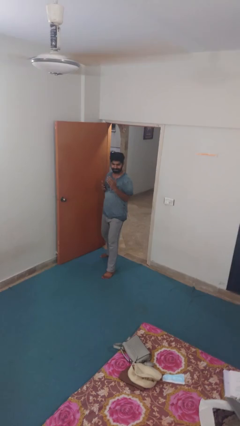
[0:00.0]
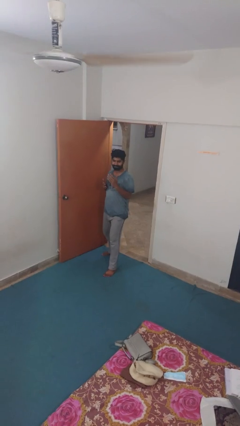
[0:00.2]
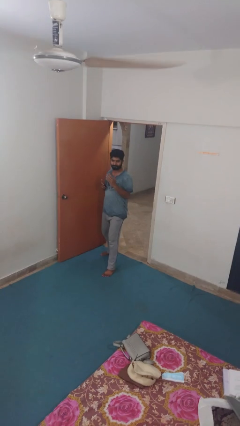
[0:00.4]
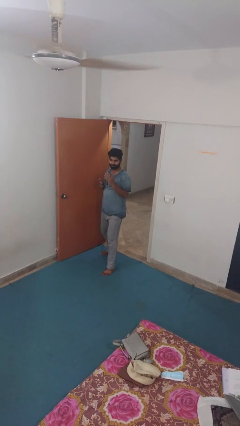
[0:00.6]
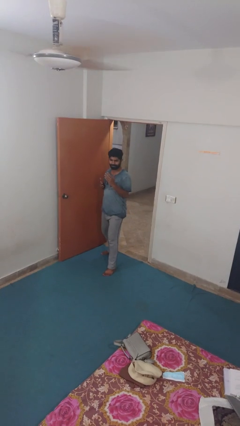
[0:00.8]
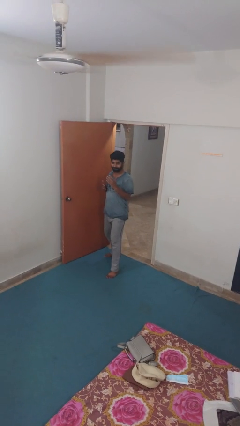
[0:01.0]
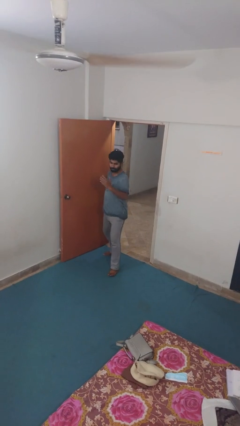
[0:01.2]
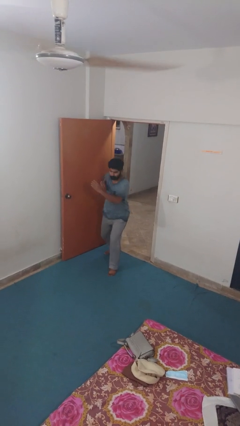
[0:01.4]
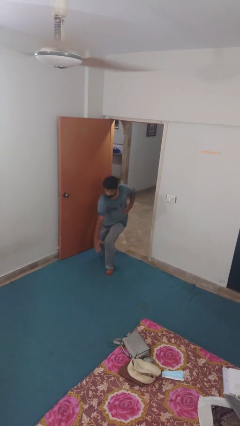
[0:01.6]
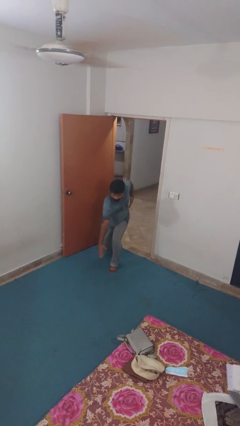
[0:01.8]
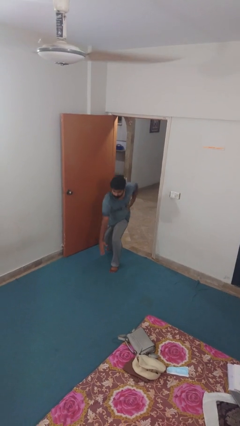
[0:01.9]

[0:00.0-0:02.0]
person karate chop

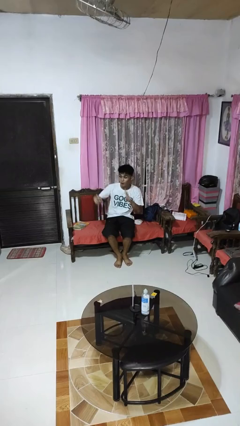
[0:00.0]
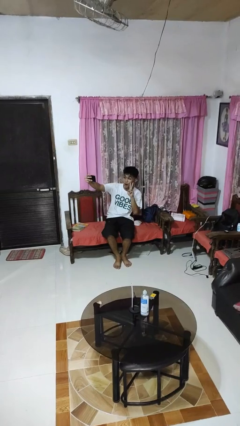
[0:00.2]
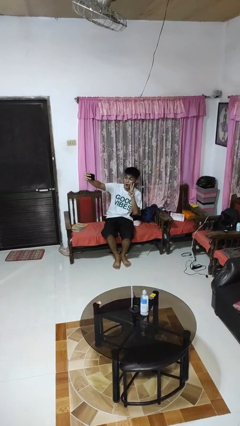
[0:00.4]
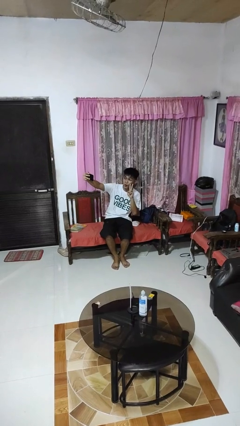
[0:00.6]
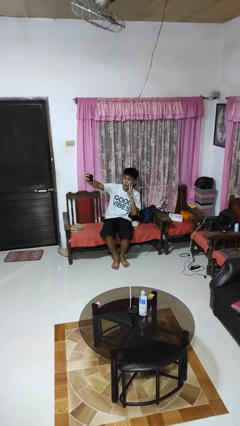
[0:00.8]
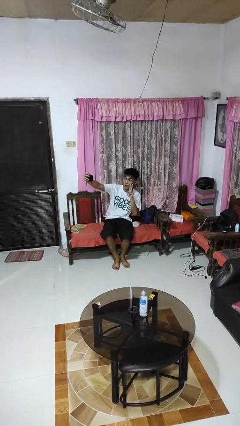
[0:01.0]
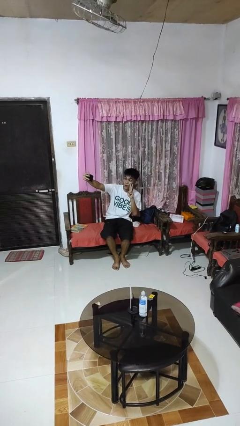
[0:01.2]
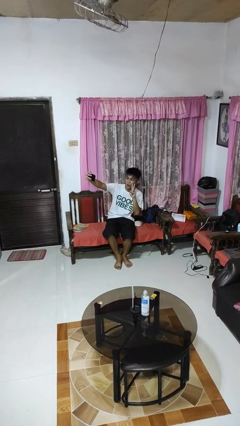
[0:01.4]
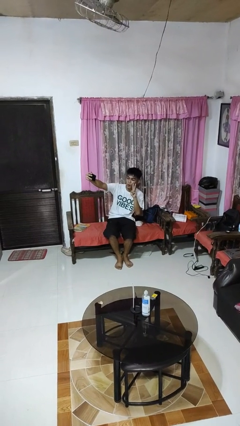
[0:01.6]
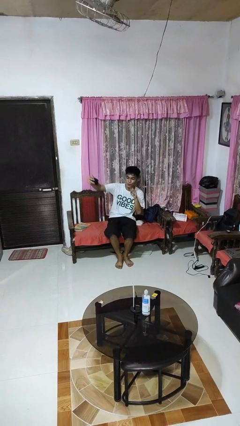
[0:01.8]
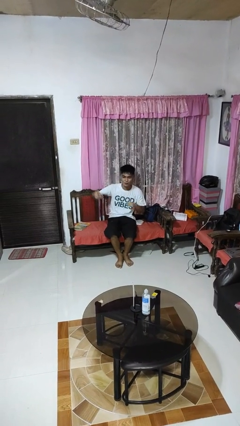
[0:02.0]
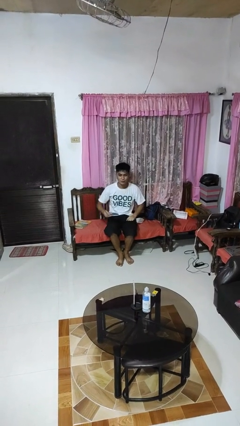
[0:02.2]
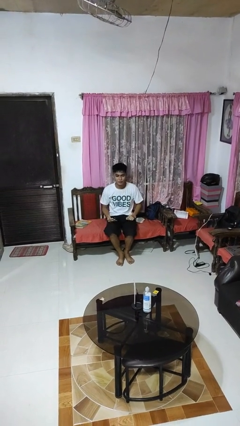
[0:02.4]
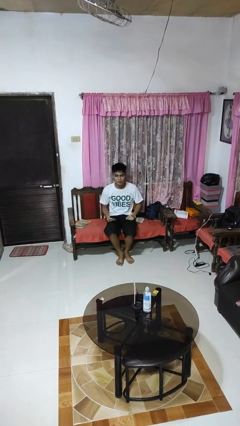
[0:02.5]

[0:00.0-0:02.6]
person takes selfie

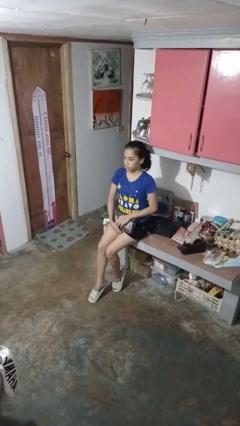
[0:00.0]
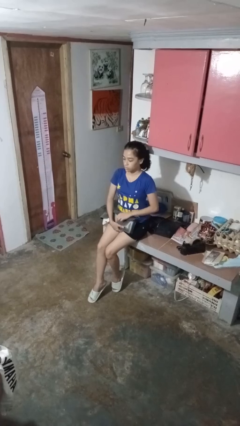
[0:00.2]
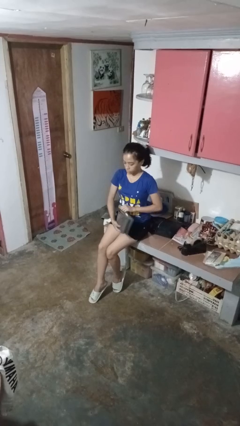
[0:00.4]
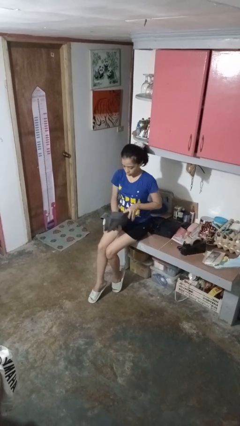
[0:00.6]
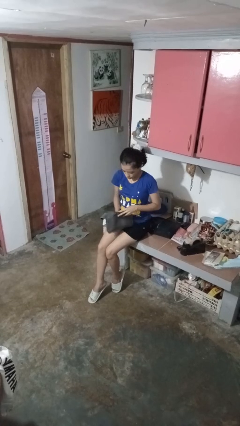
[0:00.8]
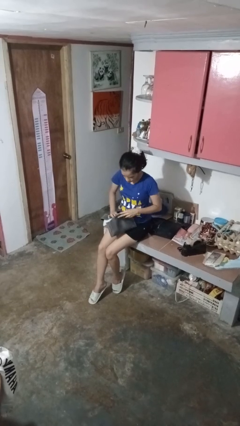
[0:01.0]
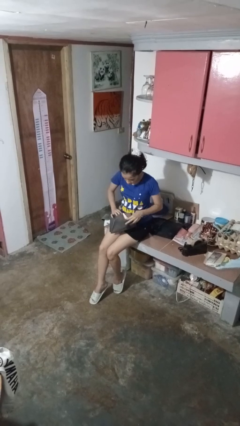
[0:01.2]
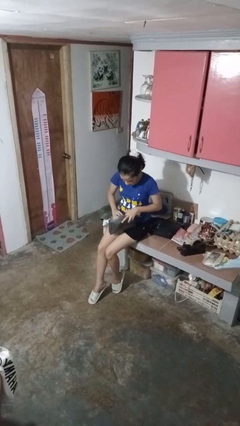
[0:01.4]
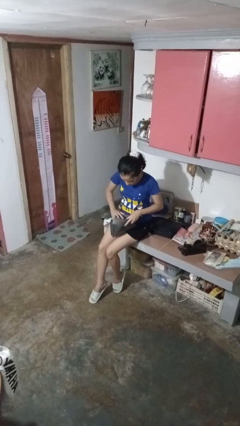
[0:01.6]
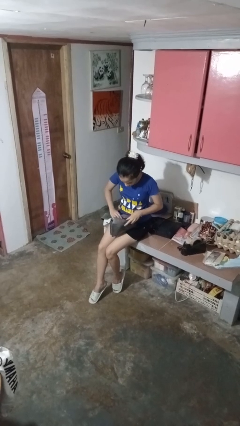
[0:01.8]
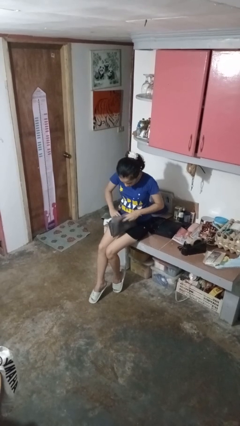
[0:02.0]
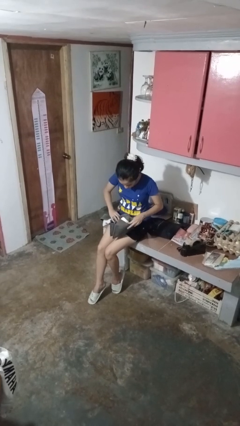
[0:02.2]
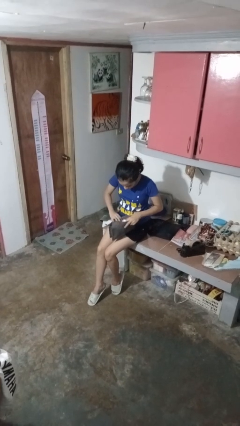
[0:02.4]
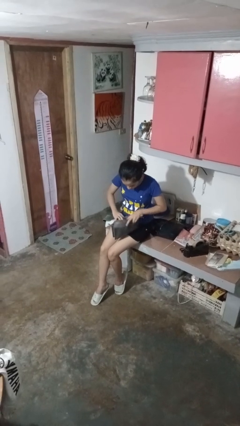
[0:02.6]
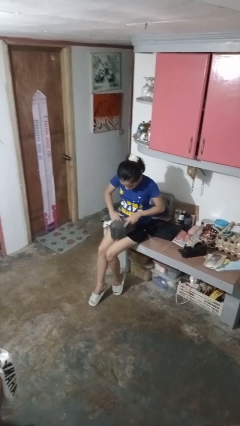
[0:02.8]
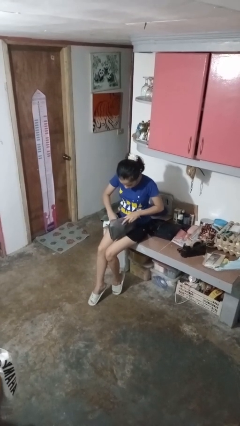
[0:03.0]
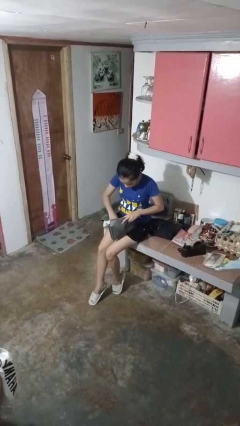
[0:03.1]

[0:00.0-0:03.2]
person searches in purse

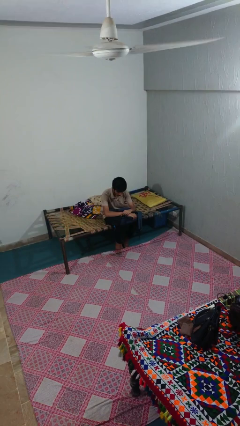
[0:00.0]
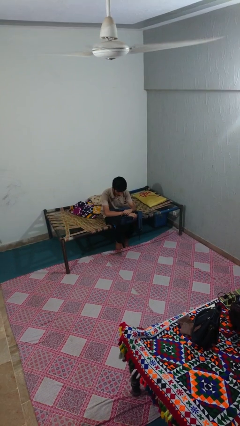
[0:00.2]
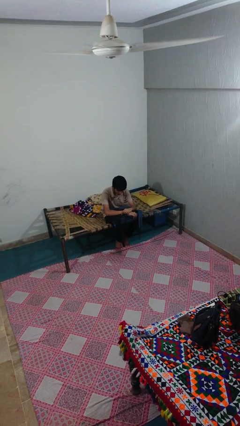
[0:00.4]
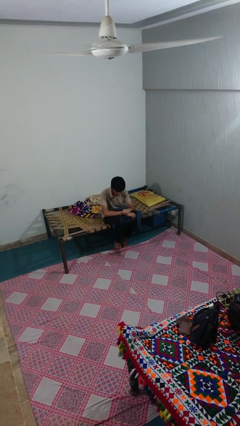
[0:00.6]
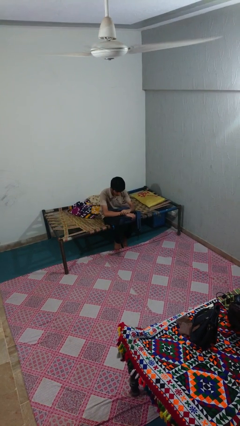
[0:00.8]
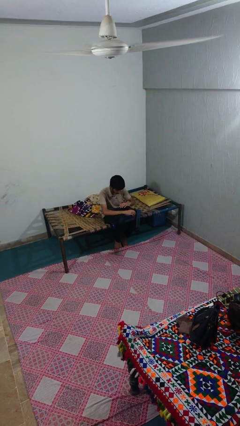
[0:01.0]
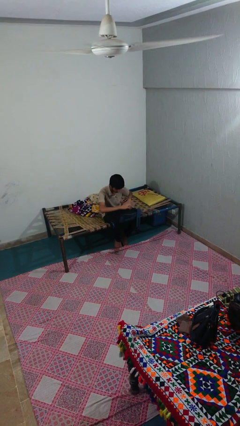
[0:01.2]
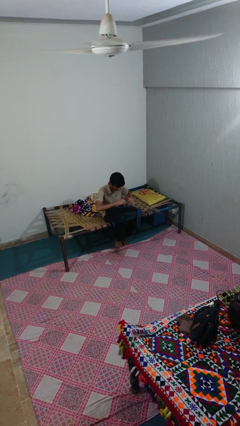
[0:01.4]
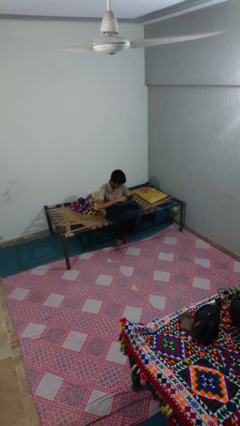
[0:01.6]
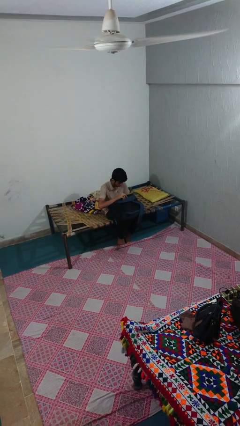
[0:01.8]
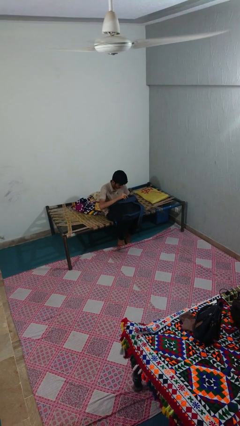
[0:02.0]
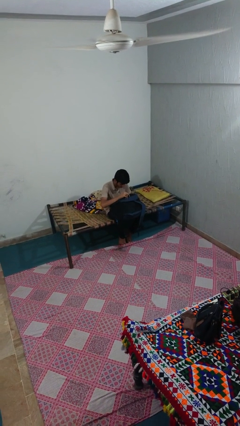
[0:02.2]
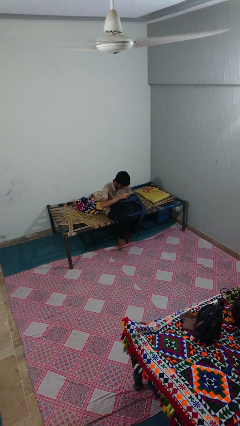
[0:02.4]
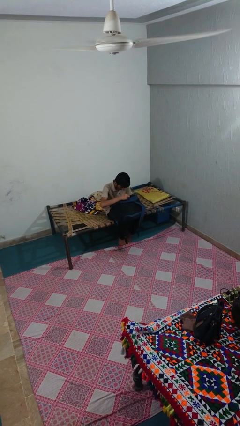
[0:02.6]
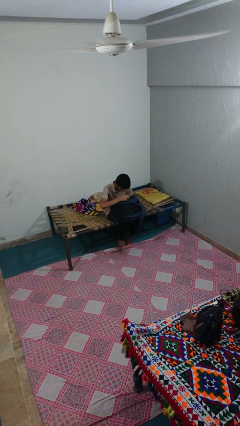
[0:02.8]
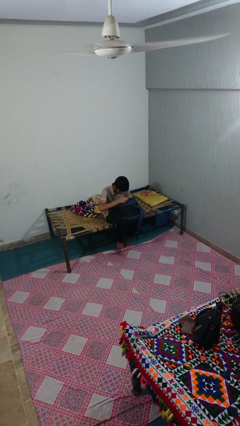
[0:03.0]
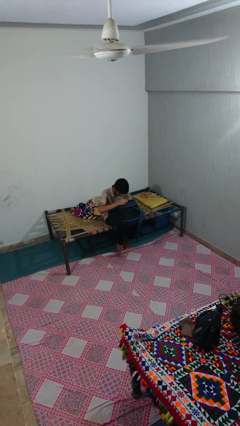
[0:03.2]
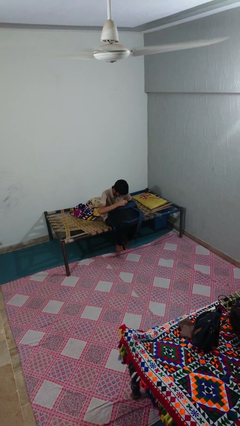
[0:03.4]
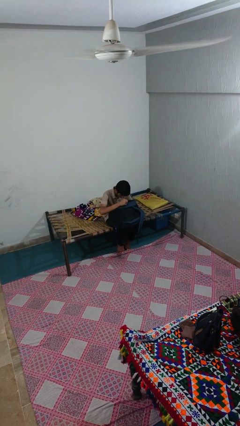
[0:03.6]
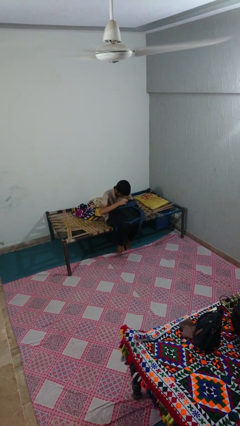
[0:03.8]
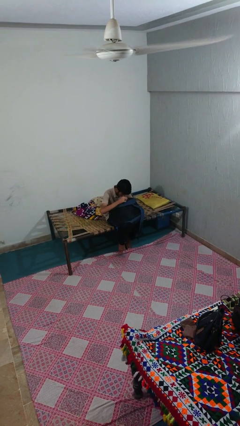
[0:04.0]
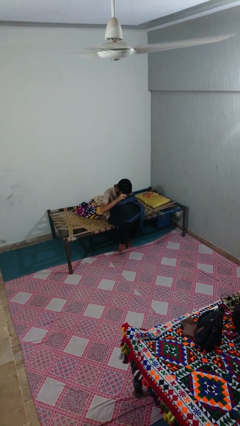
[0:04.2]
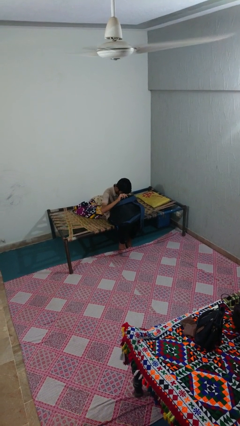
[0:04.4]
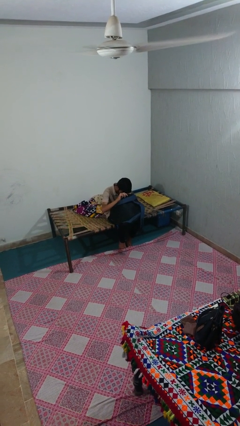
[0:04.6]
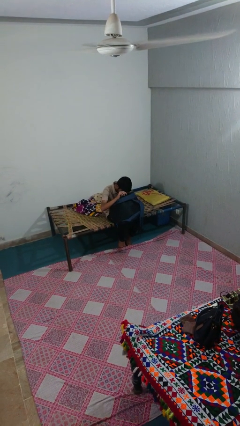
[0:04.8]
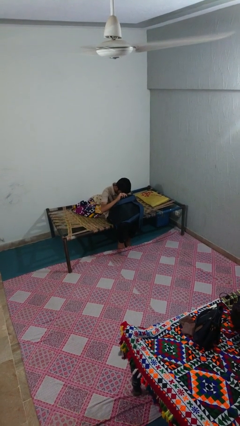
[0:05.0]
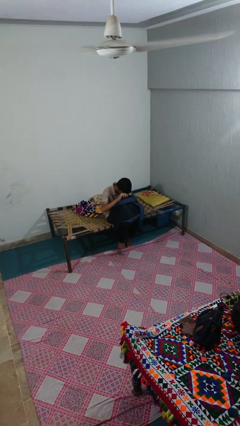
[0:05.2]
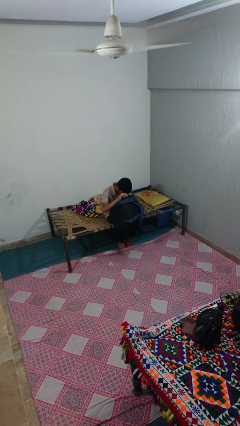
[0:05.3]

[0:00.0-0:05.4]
person searches in backpack

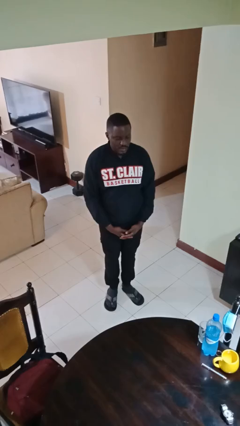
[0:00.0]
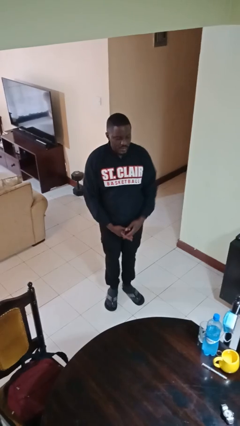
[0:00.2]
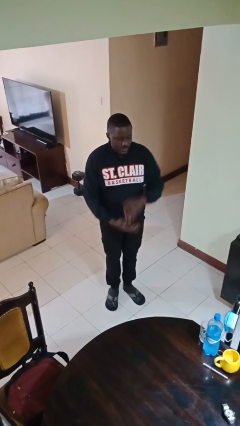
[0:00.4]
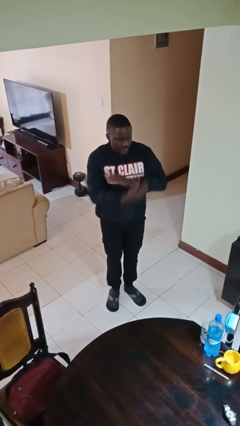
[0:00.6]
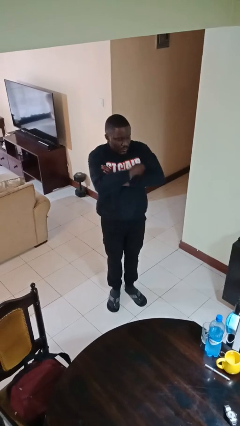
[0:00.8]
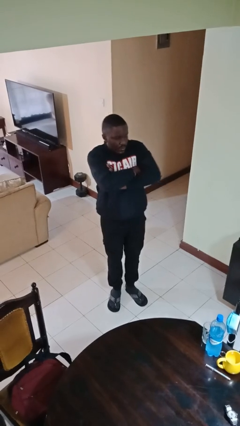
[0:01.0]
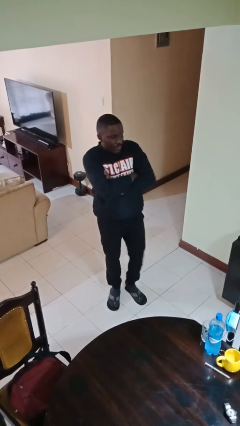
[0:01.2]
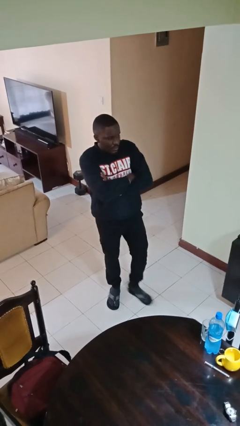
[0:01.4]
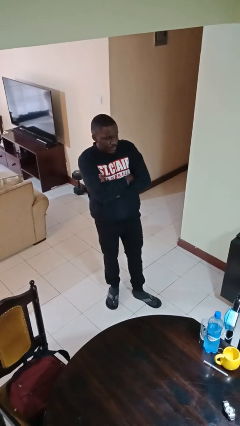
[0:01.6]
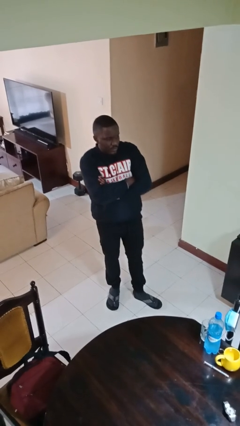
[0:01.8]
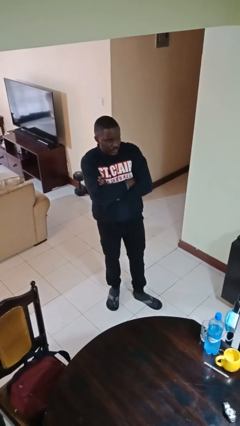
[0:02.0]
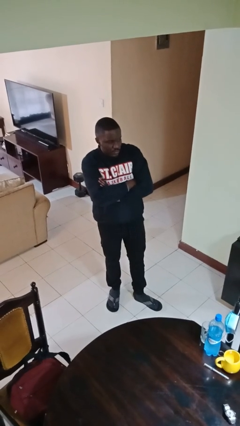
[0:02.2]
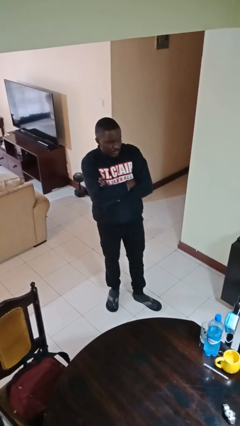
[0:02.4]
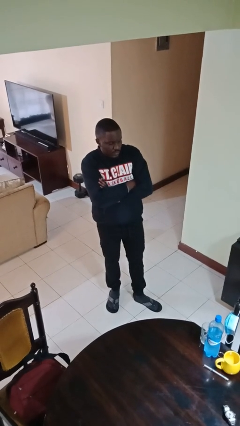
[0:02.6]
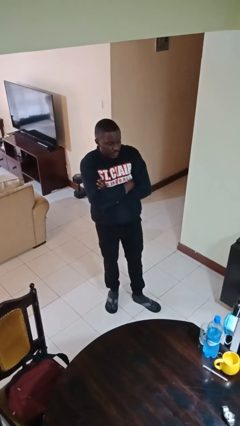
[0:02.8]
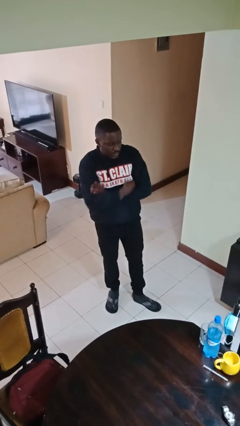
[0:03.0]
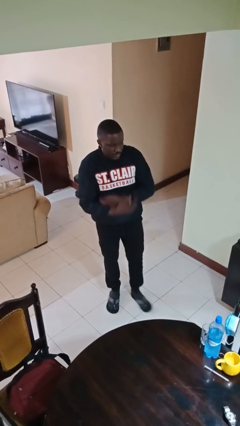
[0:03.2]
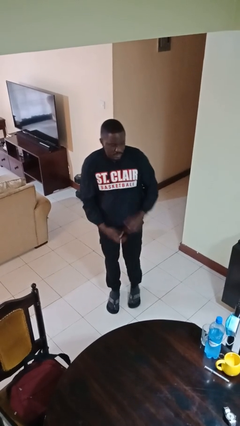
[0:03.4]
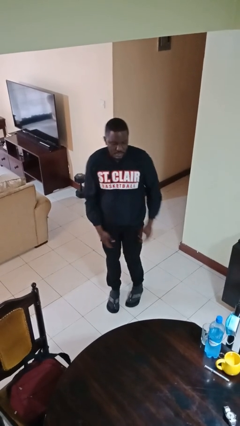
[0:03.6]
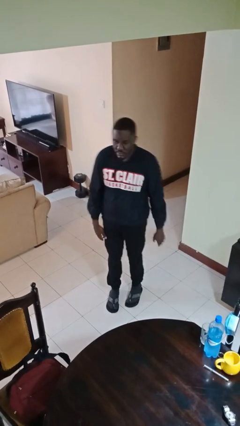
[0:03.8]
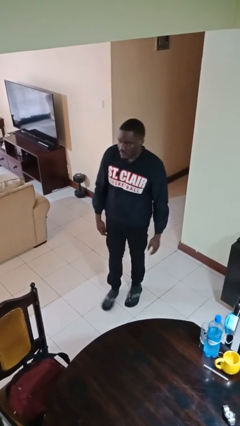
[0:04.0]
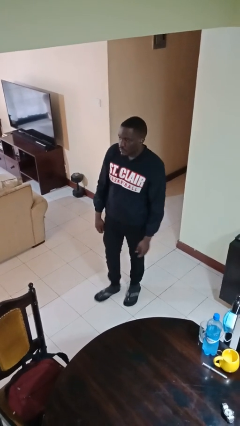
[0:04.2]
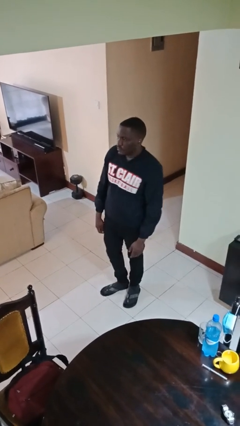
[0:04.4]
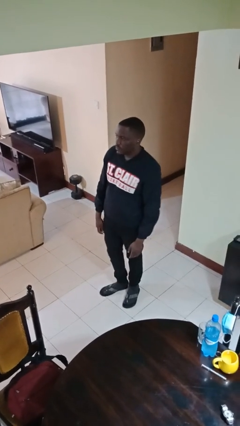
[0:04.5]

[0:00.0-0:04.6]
person crosses arms
